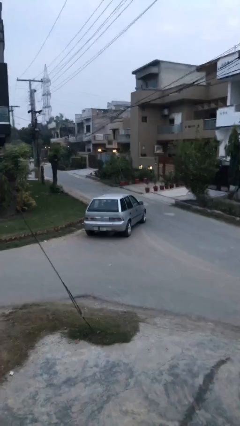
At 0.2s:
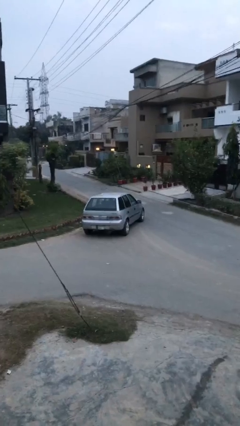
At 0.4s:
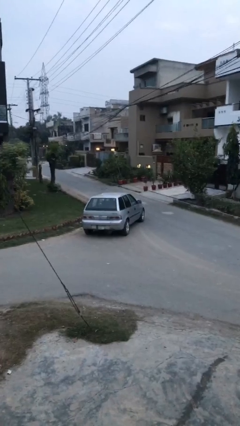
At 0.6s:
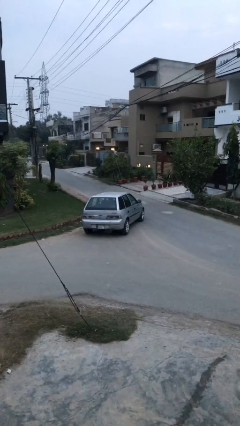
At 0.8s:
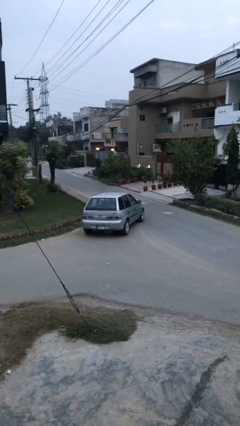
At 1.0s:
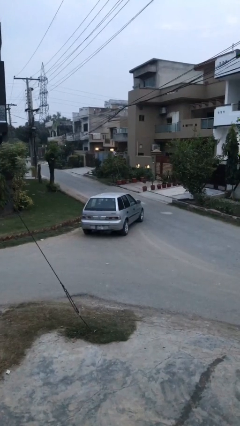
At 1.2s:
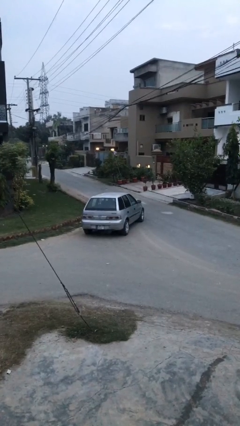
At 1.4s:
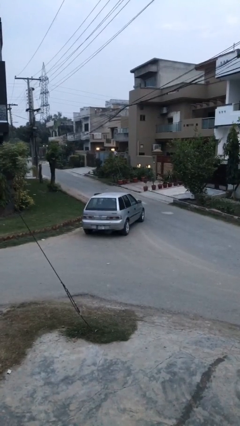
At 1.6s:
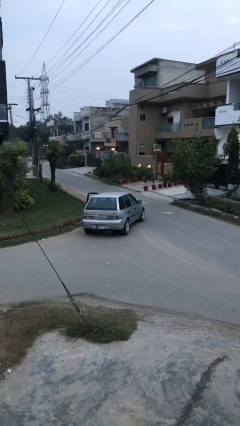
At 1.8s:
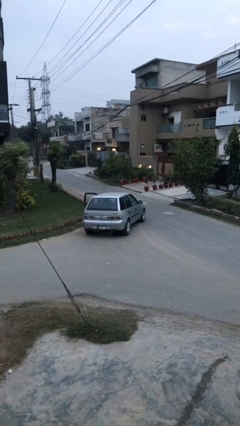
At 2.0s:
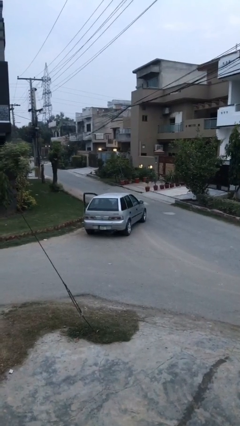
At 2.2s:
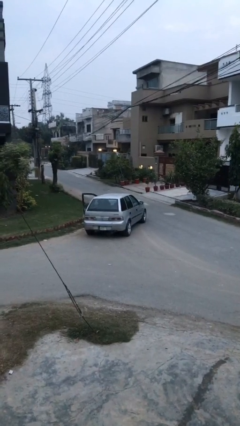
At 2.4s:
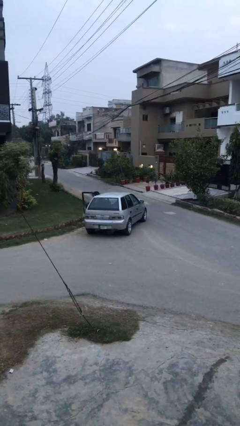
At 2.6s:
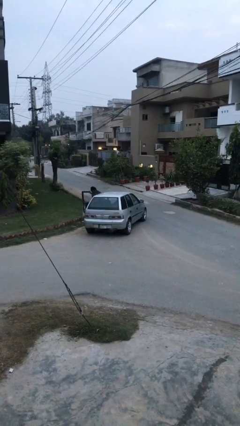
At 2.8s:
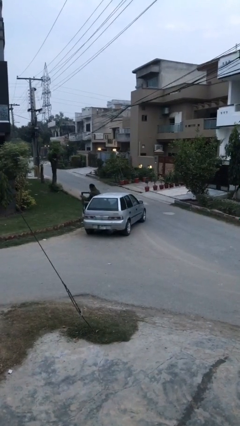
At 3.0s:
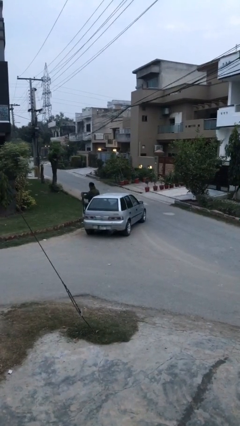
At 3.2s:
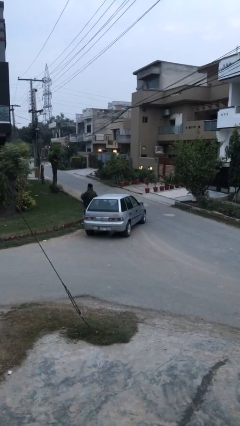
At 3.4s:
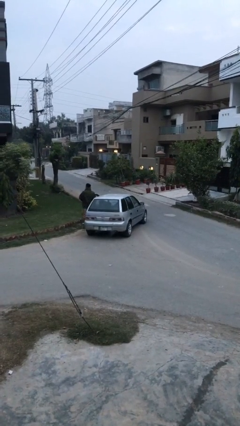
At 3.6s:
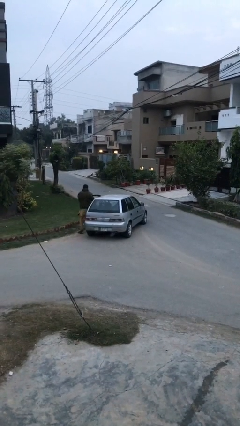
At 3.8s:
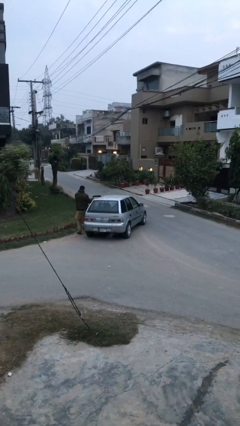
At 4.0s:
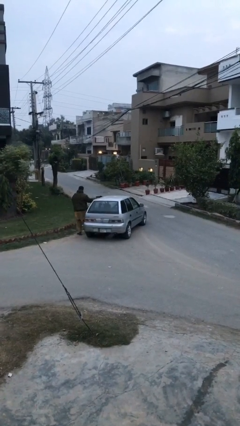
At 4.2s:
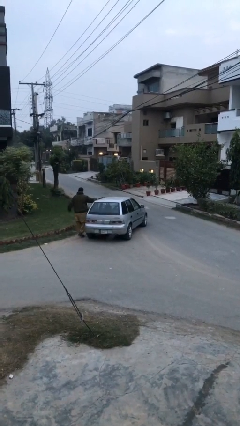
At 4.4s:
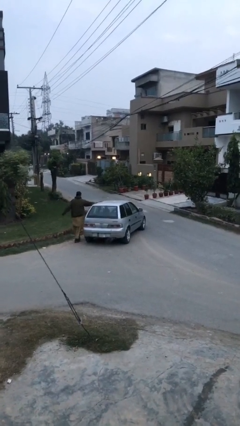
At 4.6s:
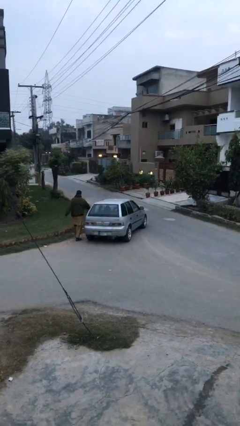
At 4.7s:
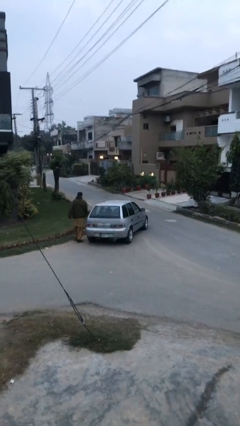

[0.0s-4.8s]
car drops off person

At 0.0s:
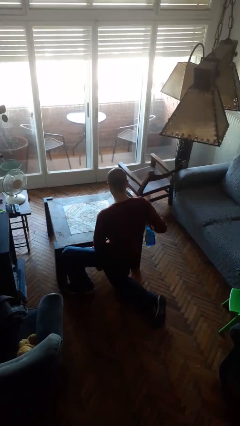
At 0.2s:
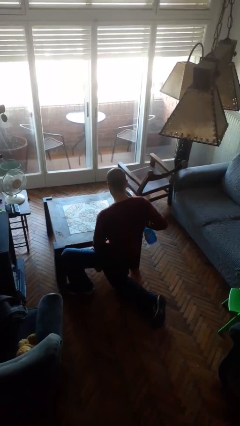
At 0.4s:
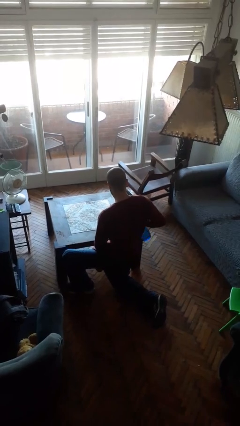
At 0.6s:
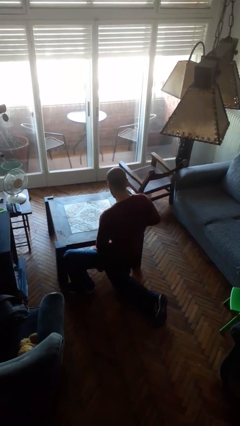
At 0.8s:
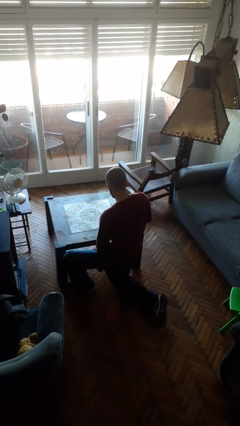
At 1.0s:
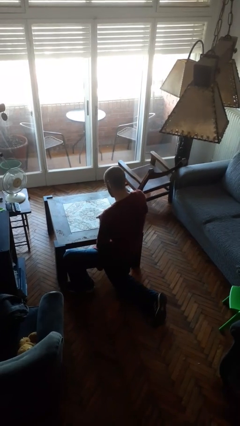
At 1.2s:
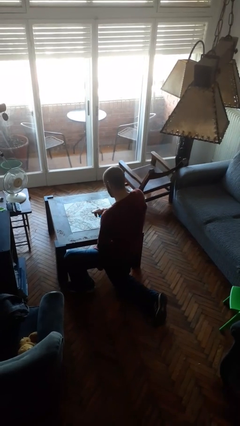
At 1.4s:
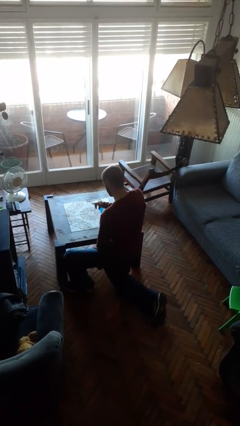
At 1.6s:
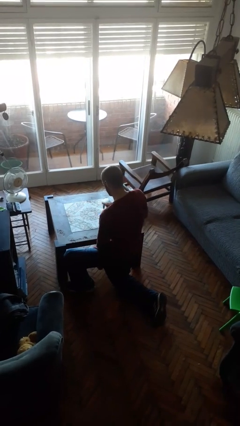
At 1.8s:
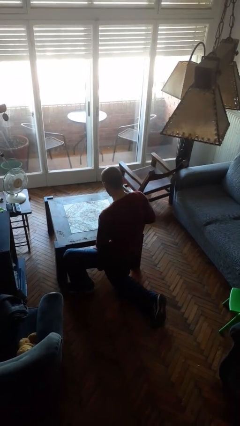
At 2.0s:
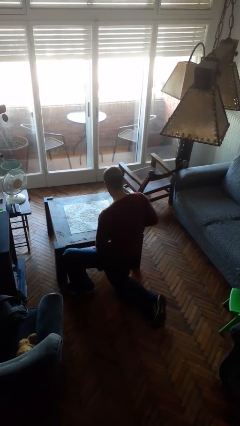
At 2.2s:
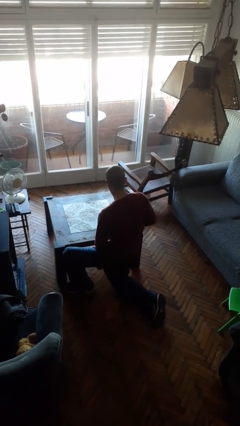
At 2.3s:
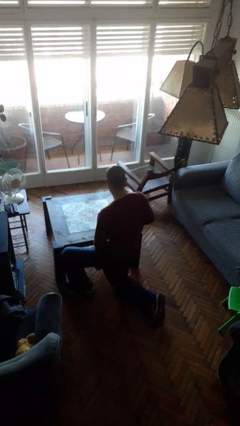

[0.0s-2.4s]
person sprays from bottle

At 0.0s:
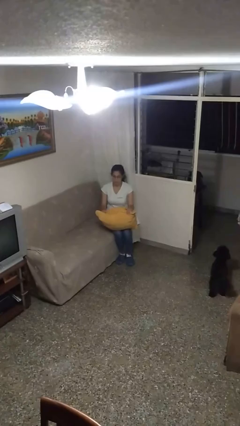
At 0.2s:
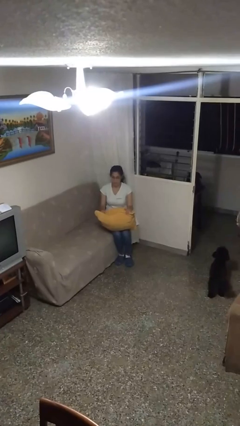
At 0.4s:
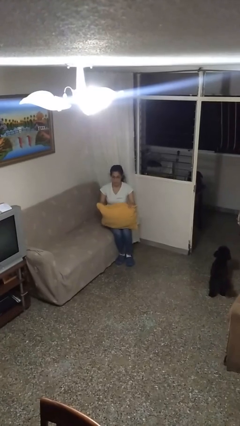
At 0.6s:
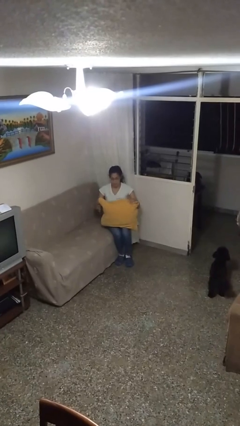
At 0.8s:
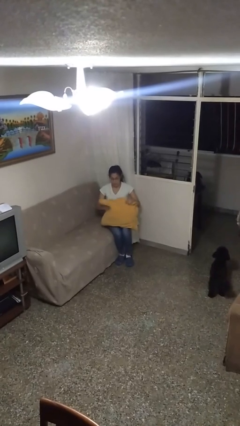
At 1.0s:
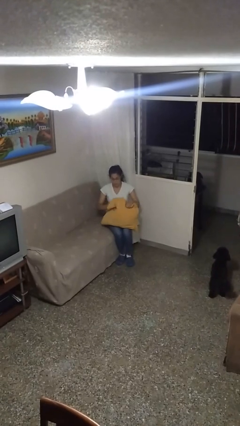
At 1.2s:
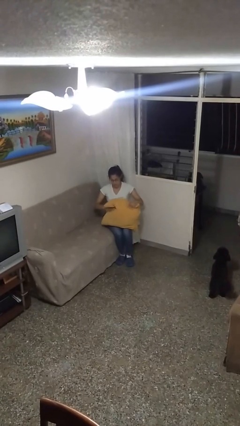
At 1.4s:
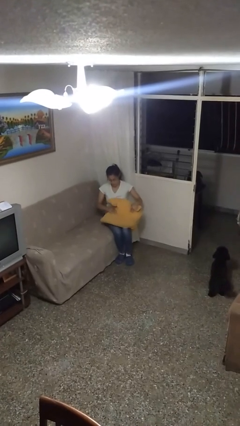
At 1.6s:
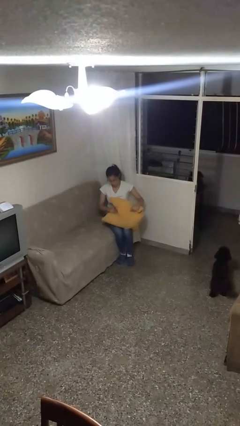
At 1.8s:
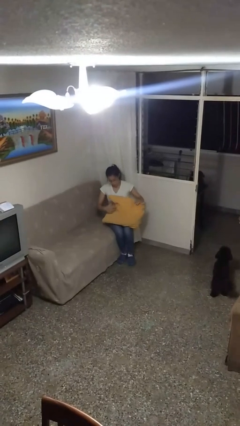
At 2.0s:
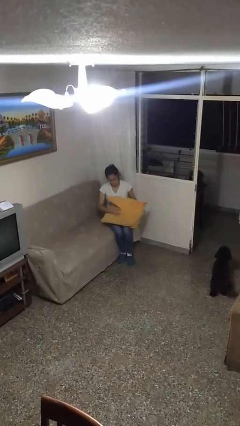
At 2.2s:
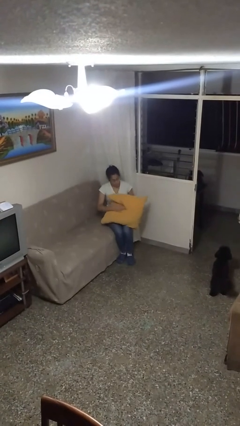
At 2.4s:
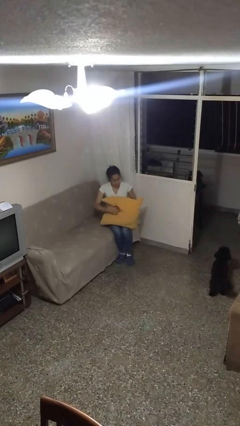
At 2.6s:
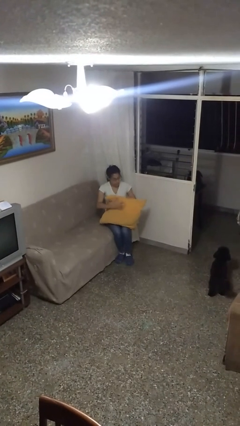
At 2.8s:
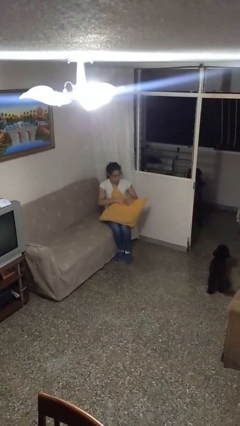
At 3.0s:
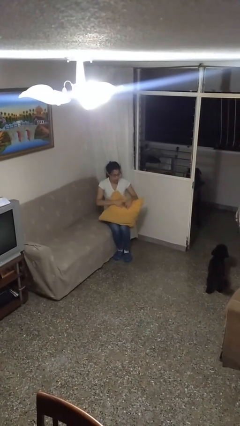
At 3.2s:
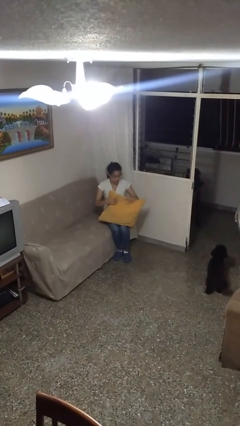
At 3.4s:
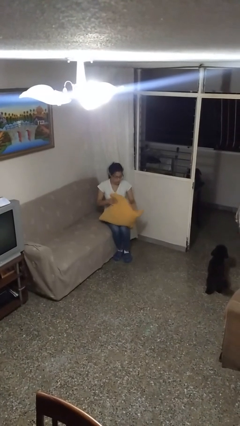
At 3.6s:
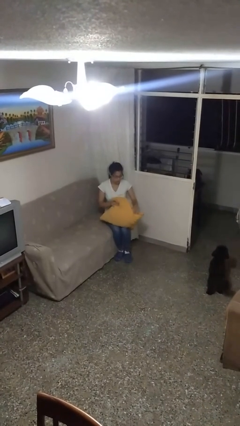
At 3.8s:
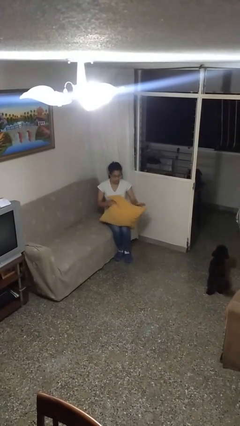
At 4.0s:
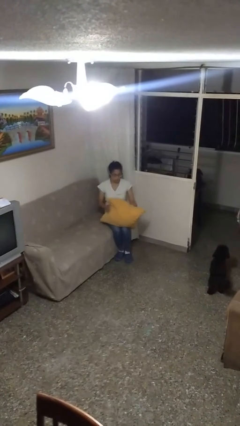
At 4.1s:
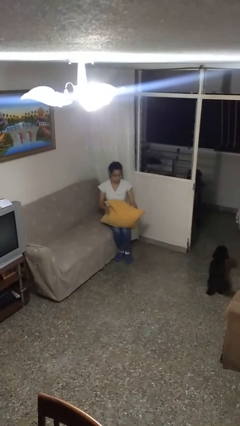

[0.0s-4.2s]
person squeezes object

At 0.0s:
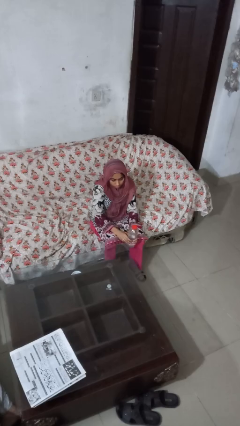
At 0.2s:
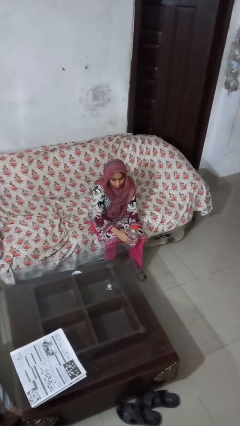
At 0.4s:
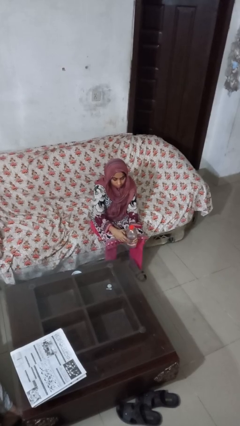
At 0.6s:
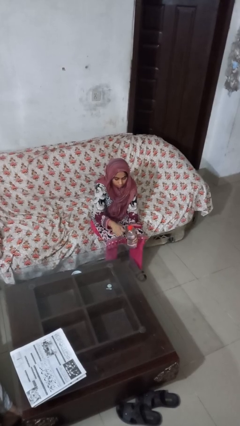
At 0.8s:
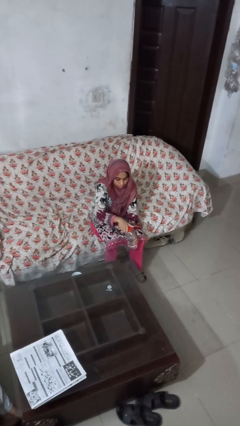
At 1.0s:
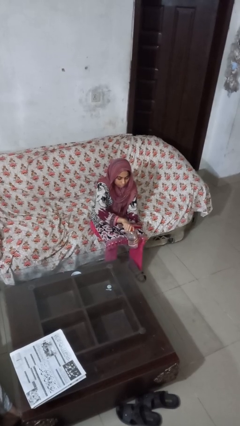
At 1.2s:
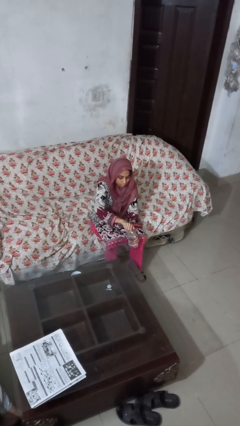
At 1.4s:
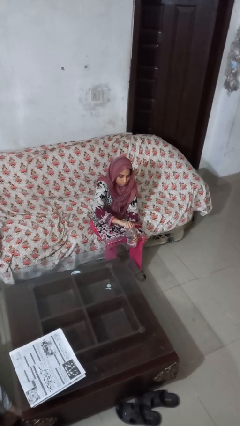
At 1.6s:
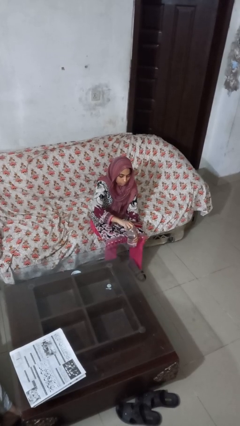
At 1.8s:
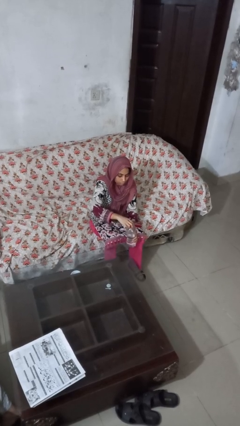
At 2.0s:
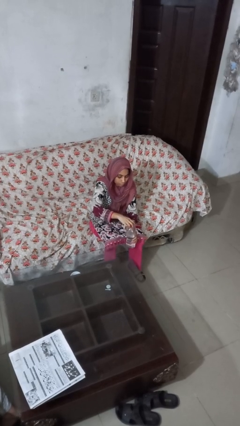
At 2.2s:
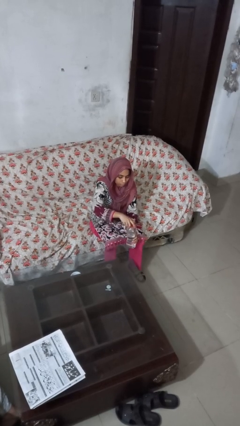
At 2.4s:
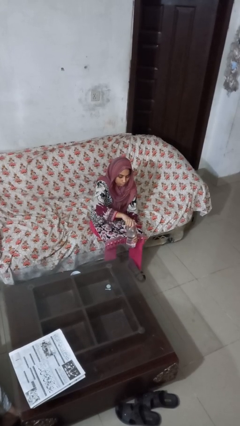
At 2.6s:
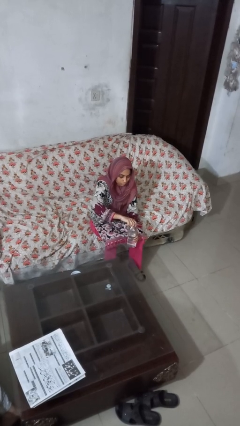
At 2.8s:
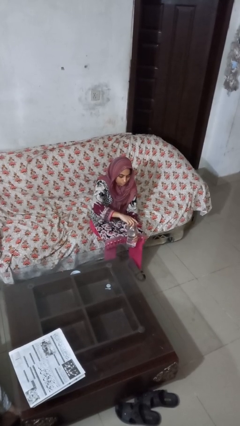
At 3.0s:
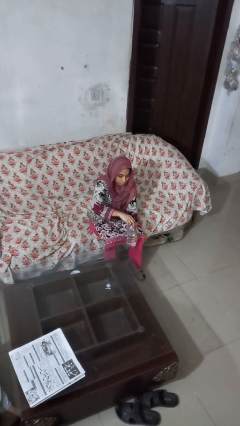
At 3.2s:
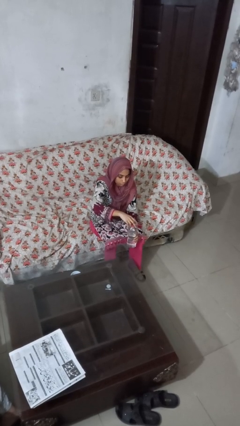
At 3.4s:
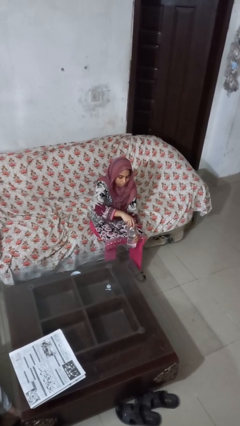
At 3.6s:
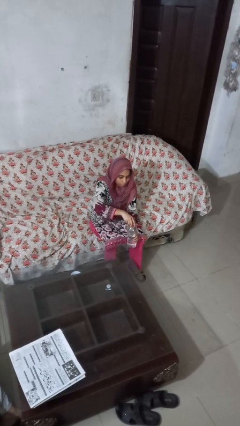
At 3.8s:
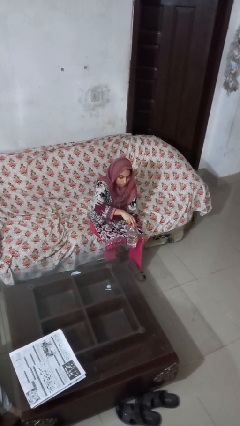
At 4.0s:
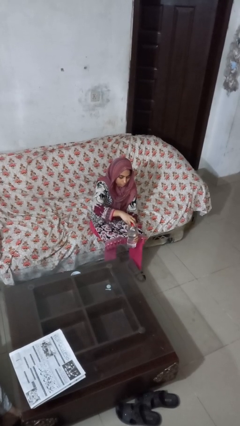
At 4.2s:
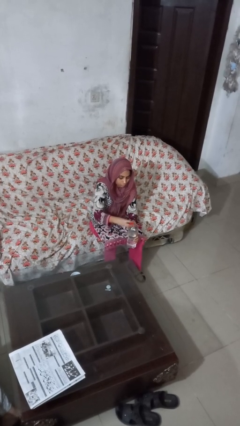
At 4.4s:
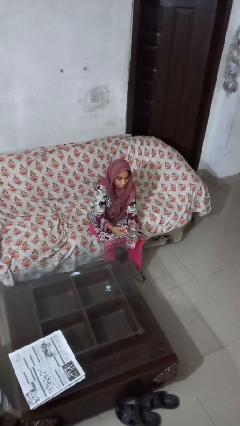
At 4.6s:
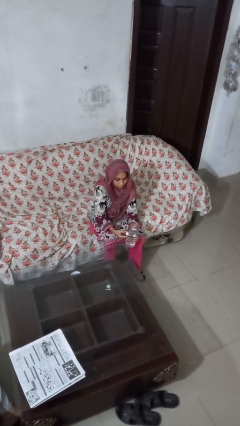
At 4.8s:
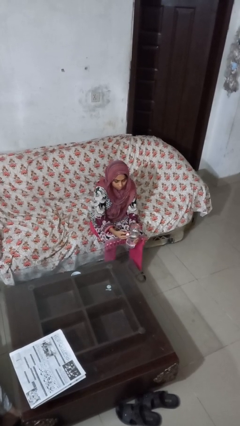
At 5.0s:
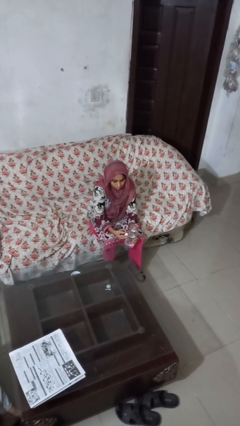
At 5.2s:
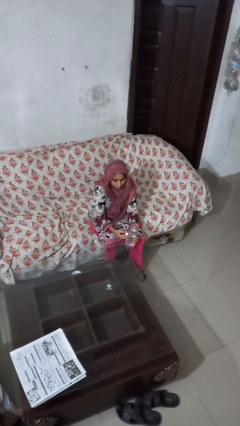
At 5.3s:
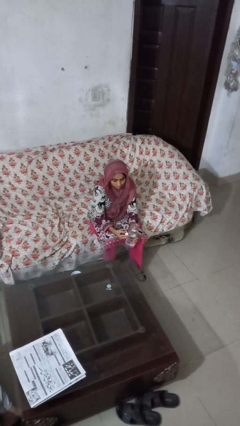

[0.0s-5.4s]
person unscrews lid from bottle

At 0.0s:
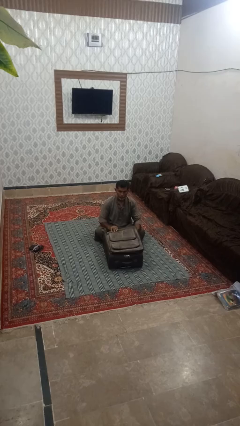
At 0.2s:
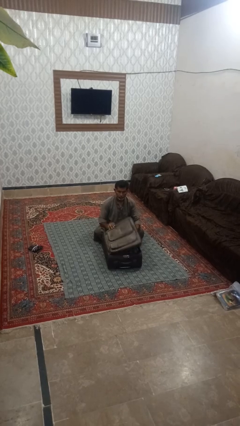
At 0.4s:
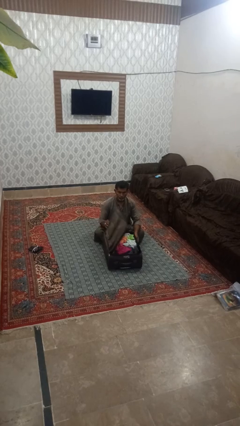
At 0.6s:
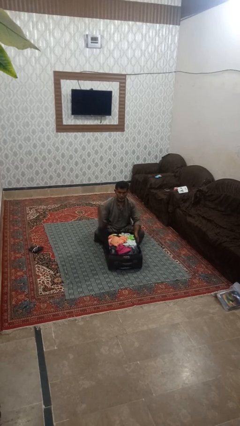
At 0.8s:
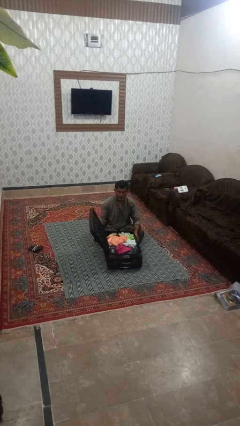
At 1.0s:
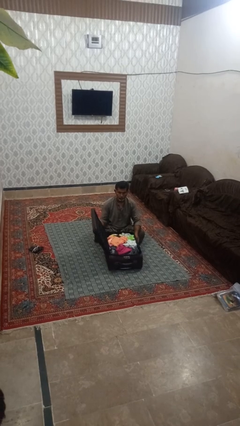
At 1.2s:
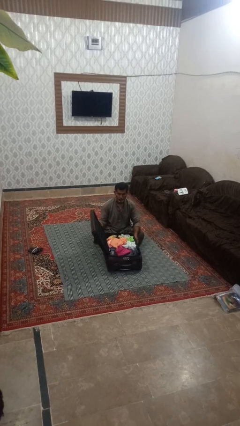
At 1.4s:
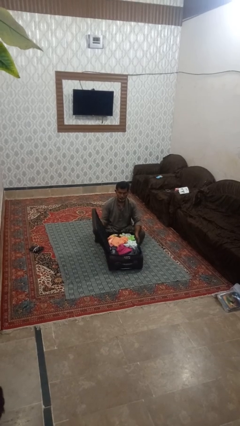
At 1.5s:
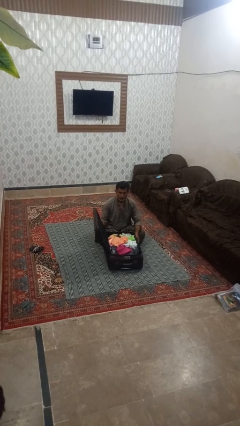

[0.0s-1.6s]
person opens suitcase
